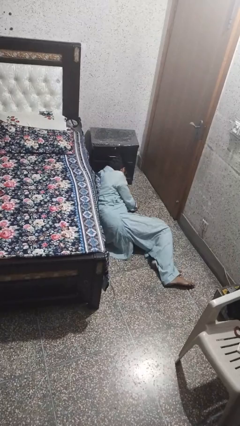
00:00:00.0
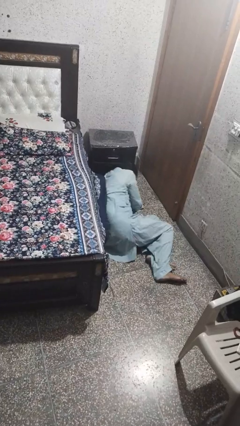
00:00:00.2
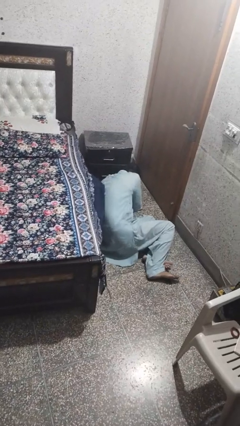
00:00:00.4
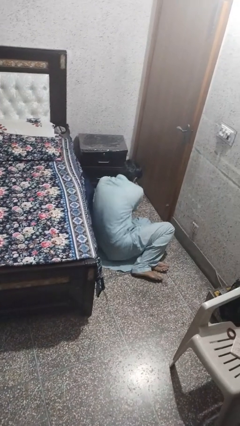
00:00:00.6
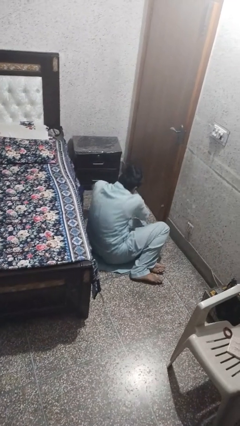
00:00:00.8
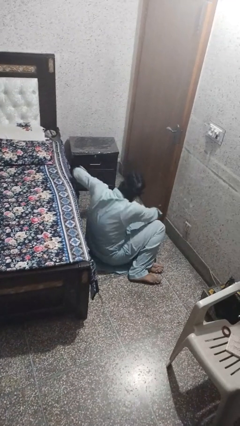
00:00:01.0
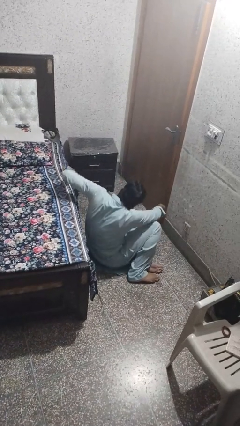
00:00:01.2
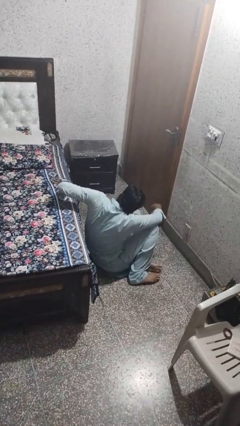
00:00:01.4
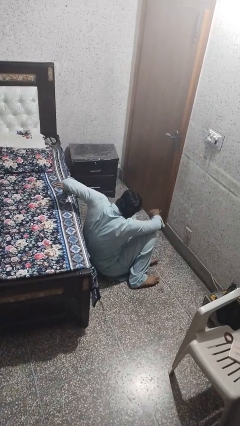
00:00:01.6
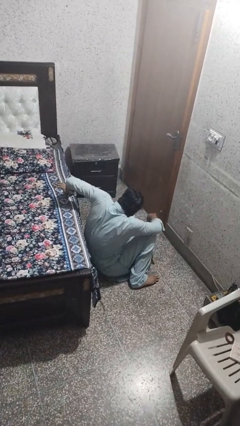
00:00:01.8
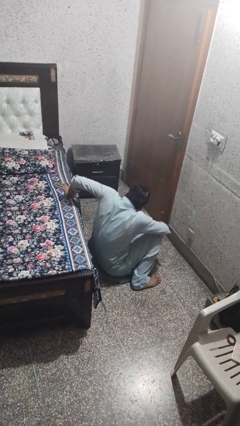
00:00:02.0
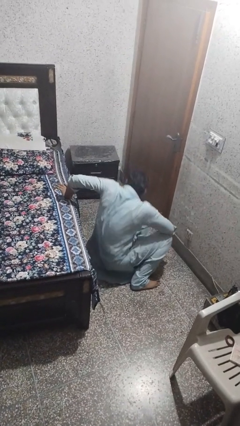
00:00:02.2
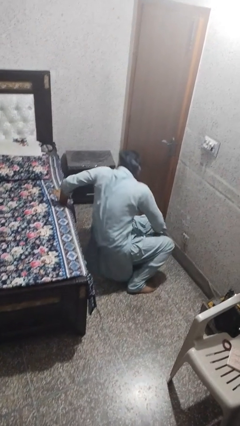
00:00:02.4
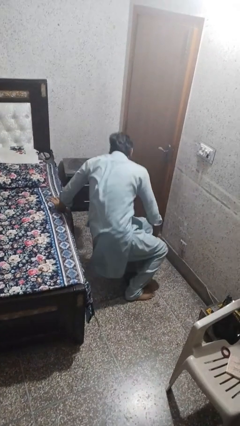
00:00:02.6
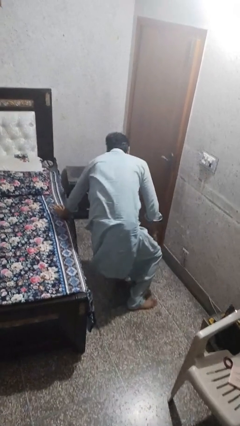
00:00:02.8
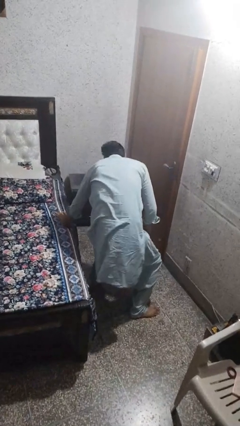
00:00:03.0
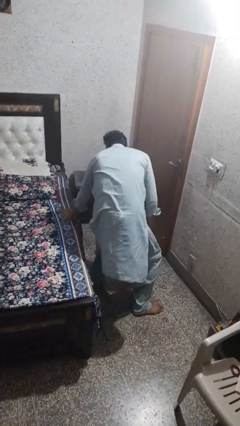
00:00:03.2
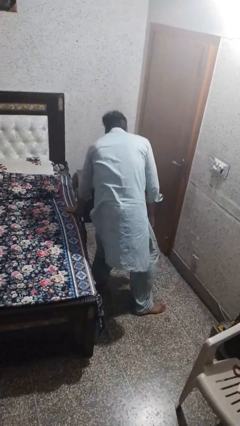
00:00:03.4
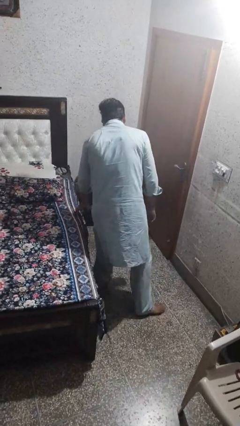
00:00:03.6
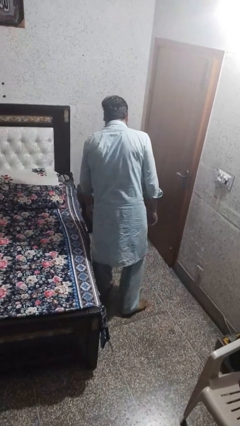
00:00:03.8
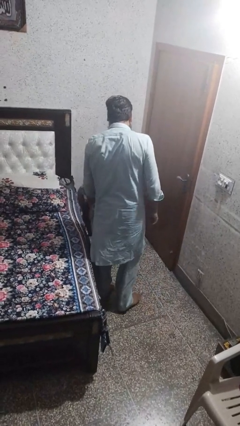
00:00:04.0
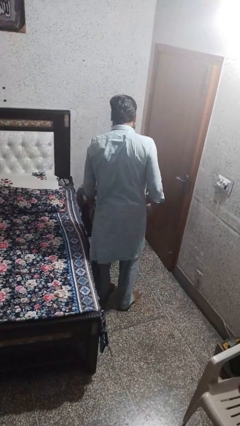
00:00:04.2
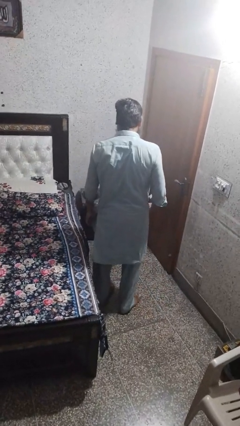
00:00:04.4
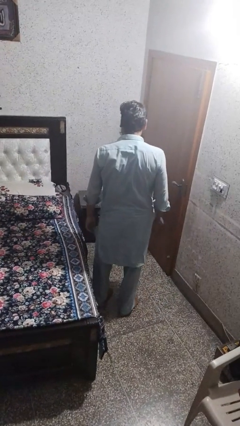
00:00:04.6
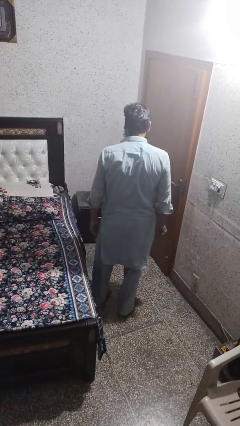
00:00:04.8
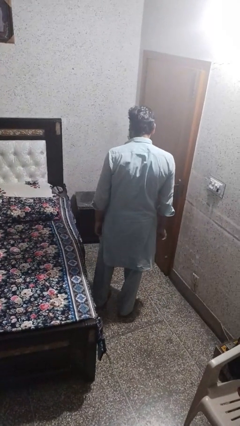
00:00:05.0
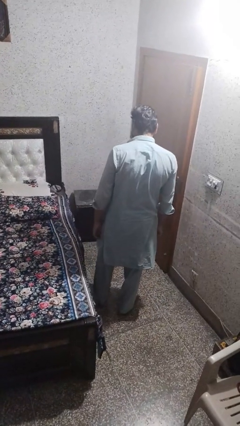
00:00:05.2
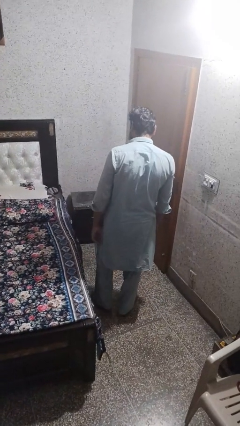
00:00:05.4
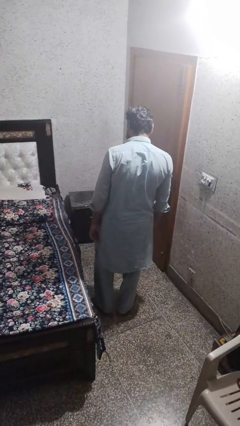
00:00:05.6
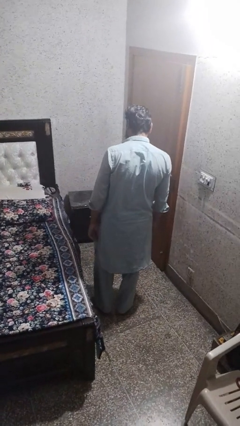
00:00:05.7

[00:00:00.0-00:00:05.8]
person stands up from floor

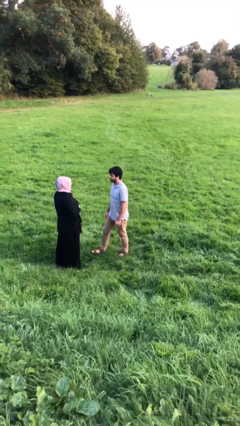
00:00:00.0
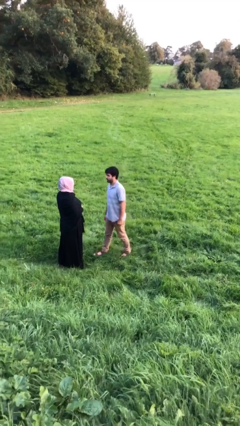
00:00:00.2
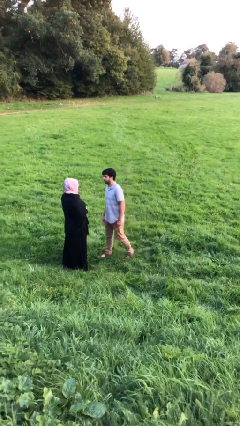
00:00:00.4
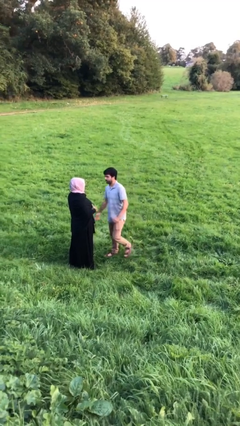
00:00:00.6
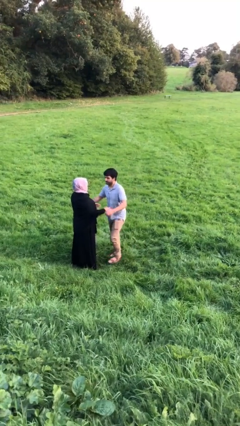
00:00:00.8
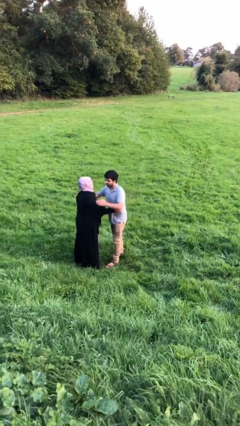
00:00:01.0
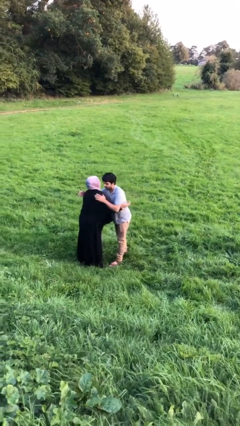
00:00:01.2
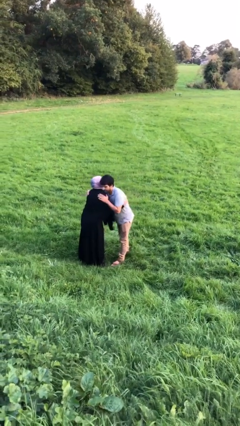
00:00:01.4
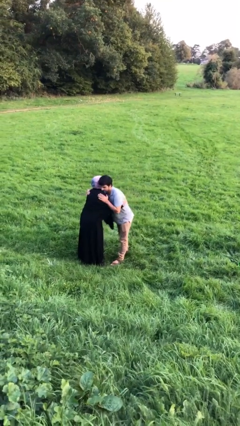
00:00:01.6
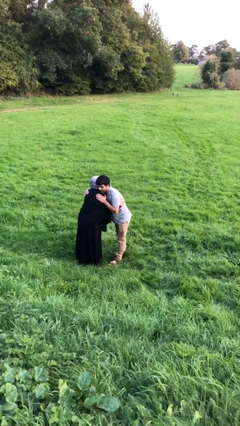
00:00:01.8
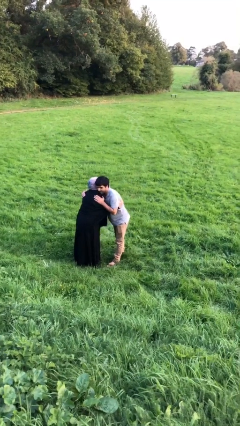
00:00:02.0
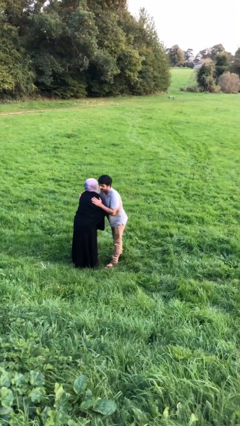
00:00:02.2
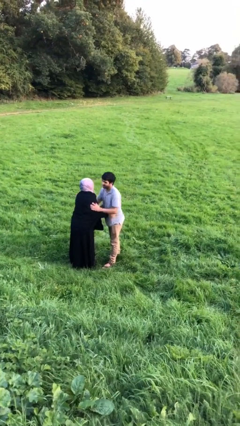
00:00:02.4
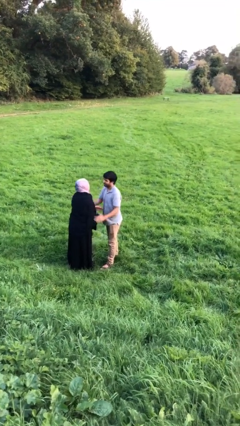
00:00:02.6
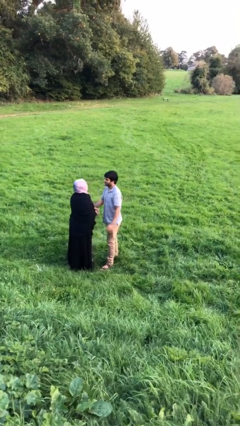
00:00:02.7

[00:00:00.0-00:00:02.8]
person embraces person

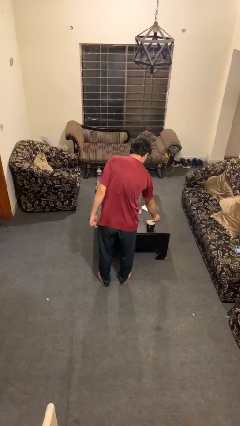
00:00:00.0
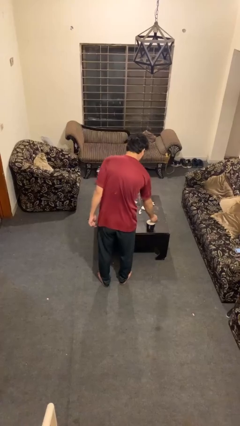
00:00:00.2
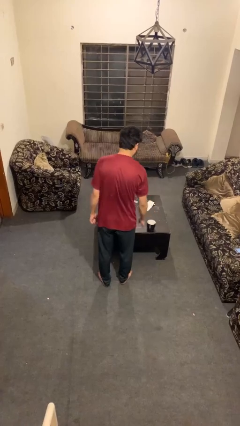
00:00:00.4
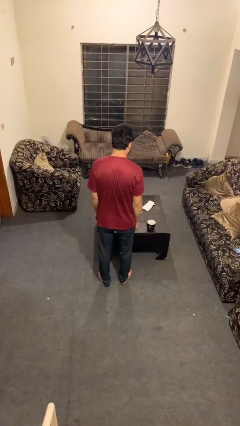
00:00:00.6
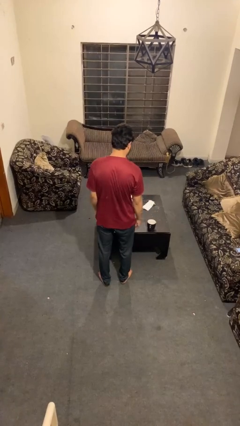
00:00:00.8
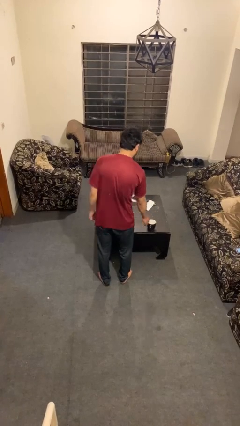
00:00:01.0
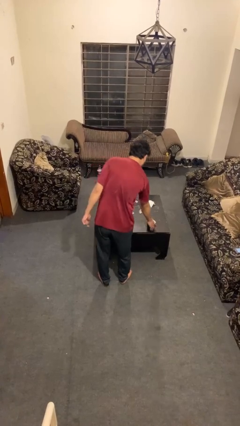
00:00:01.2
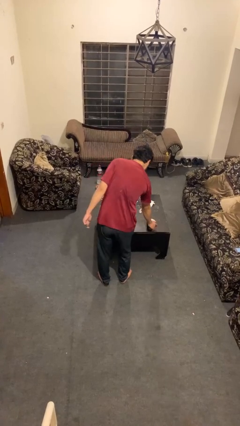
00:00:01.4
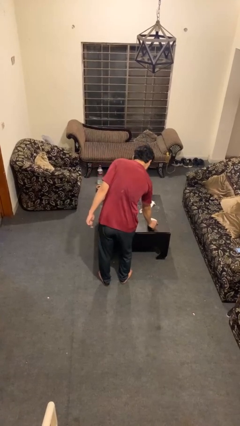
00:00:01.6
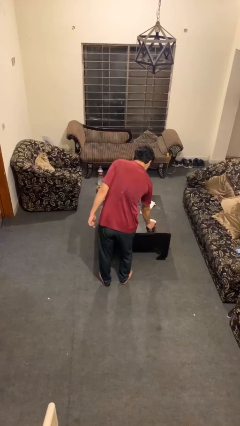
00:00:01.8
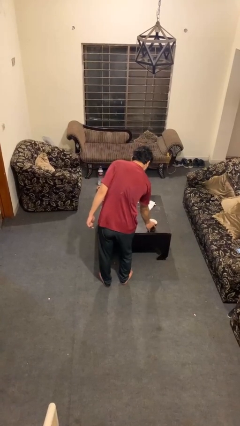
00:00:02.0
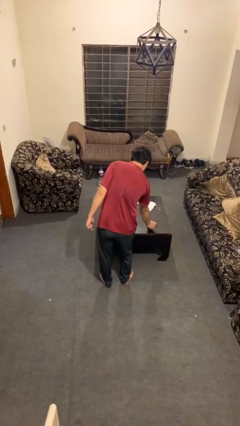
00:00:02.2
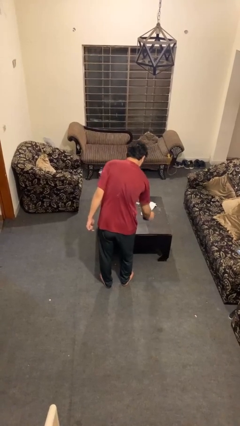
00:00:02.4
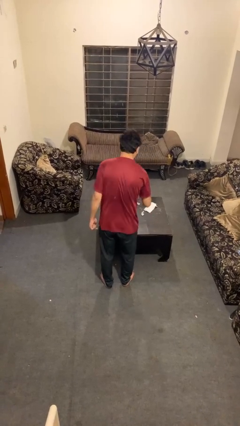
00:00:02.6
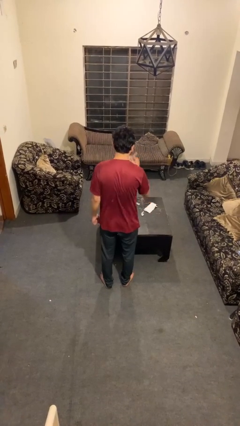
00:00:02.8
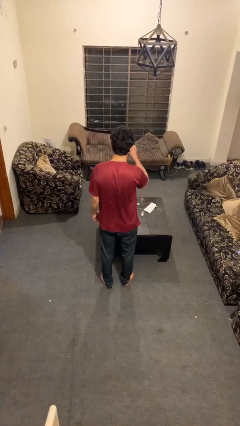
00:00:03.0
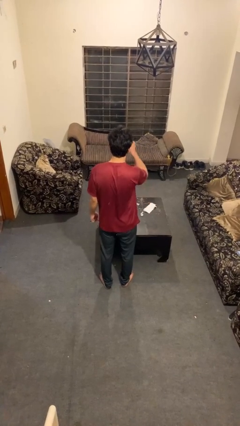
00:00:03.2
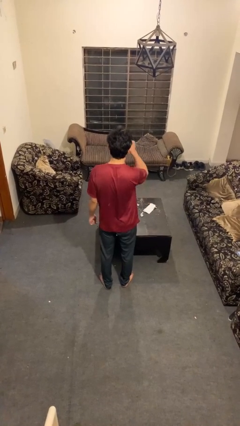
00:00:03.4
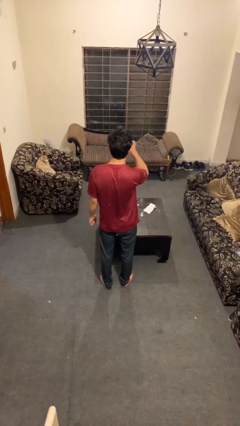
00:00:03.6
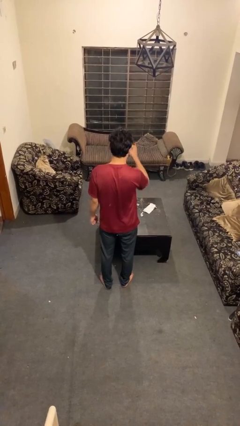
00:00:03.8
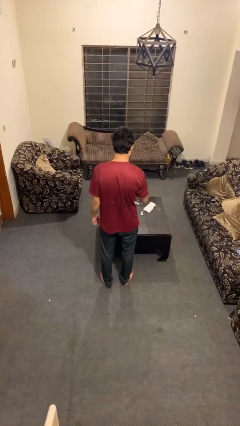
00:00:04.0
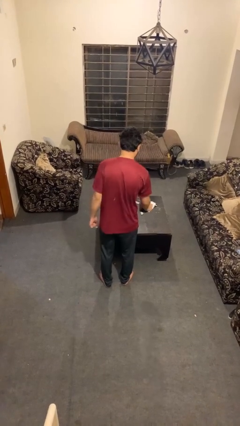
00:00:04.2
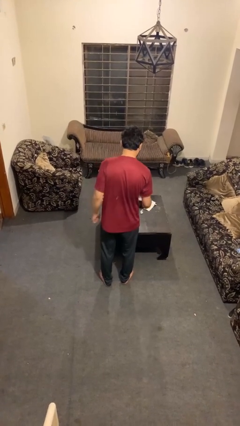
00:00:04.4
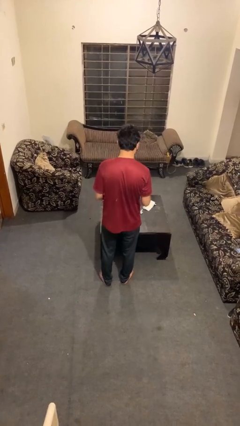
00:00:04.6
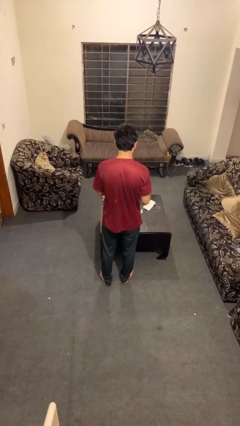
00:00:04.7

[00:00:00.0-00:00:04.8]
person drinks from mug

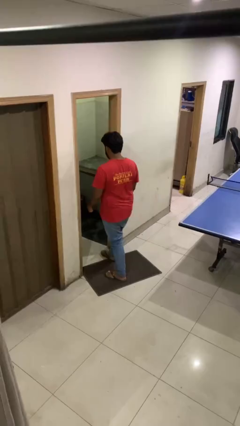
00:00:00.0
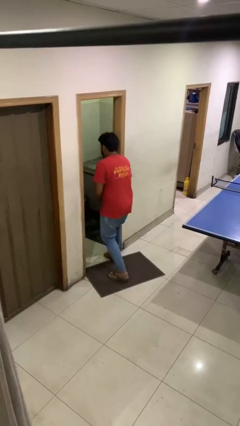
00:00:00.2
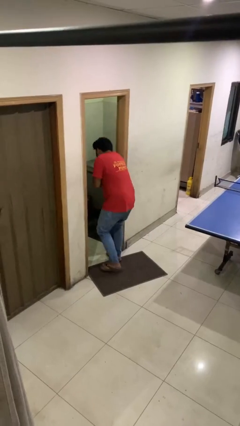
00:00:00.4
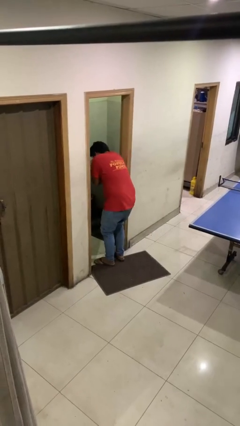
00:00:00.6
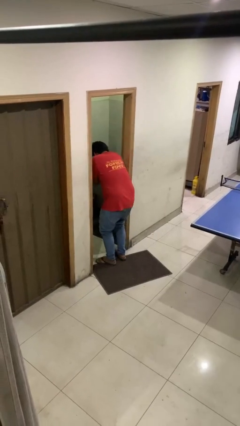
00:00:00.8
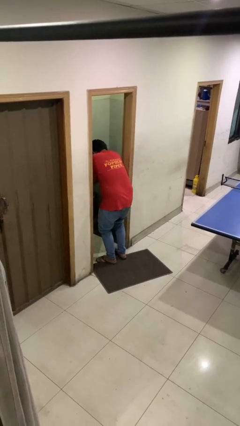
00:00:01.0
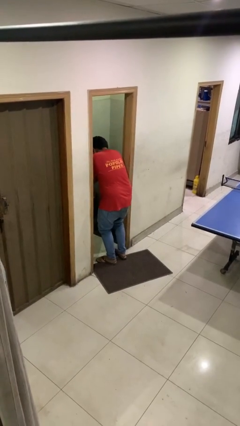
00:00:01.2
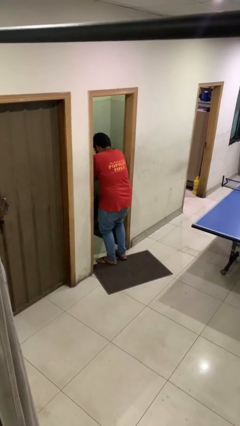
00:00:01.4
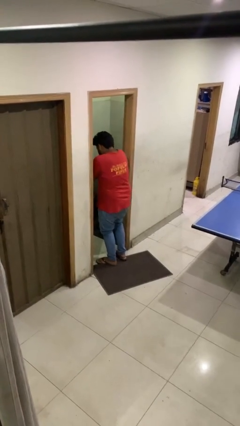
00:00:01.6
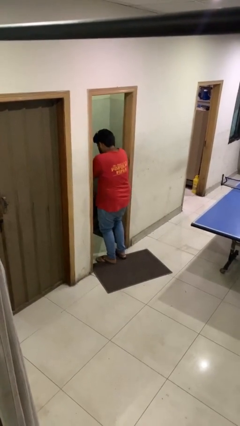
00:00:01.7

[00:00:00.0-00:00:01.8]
person bumps into wall

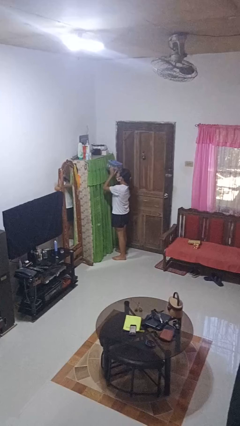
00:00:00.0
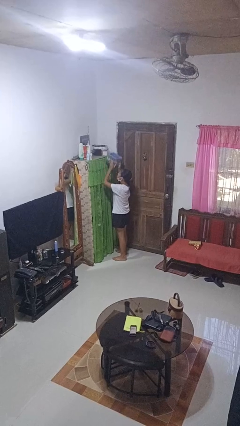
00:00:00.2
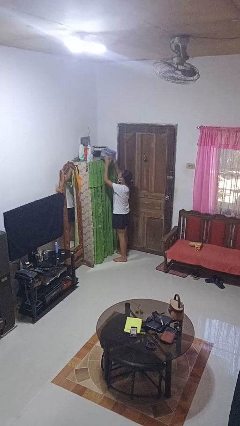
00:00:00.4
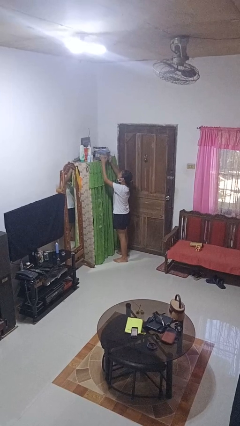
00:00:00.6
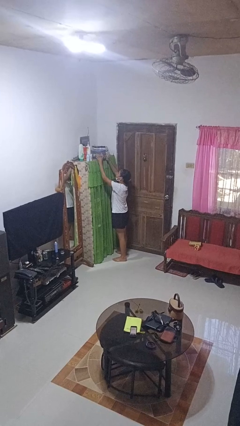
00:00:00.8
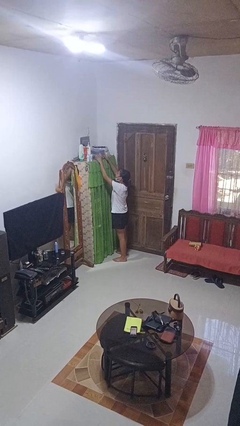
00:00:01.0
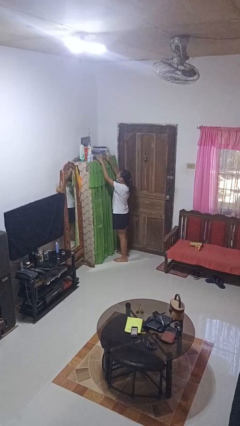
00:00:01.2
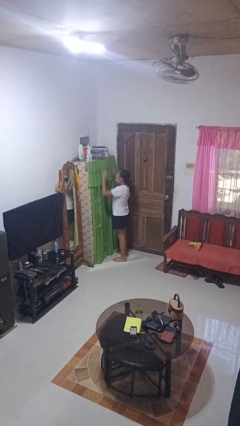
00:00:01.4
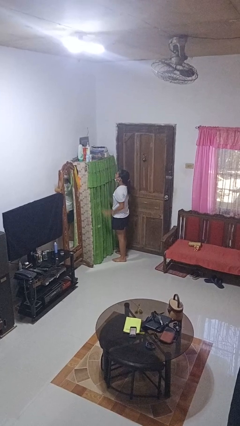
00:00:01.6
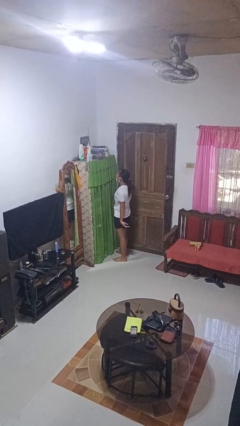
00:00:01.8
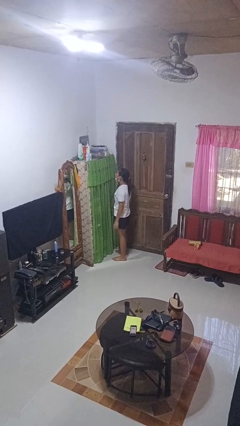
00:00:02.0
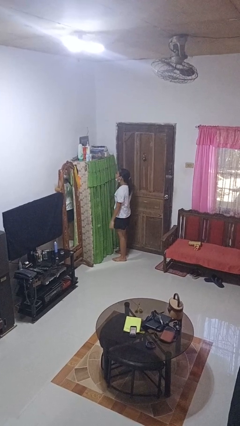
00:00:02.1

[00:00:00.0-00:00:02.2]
person puts down object on shelf

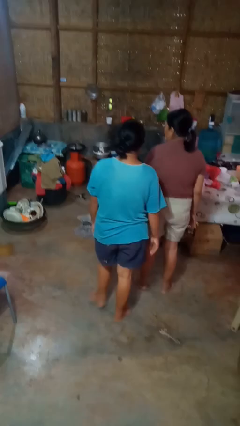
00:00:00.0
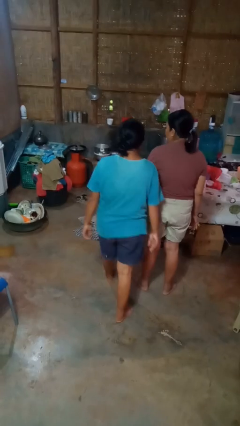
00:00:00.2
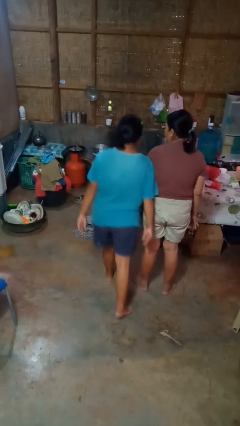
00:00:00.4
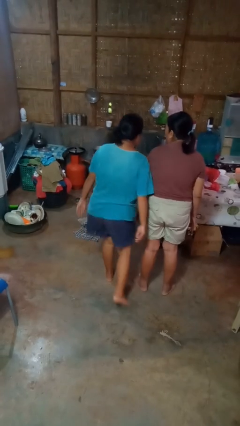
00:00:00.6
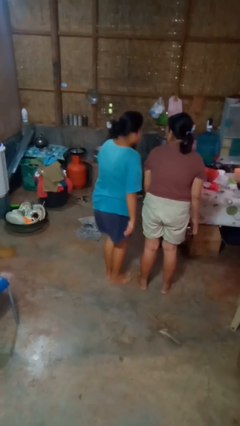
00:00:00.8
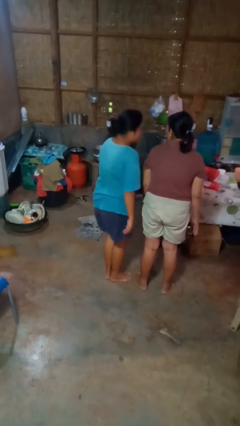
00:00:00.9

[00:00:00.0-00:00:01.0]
person bumps into person
